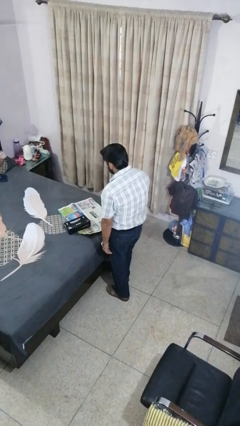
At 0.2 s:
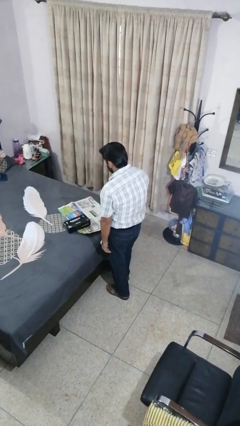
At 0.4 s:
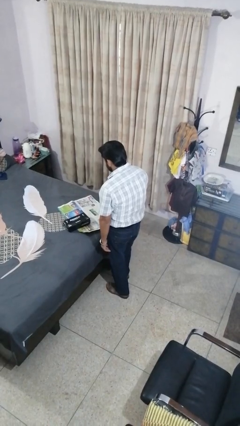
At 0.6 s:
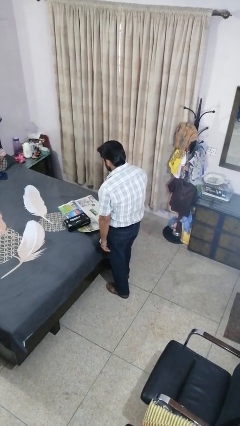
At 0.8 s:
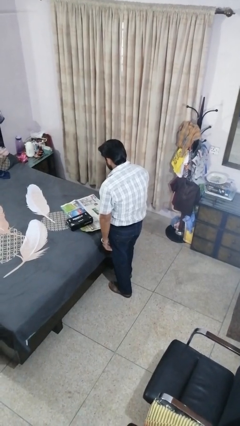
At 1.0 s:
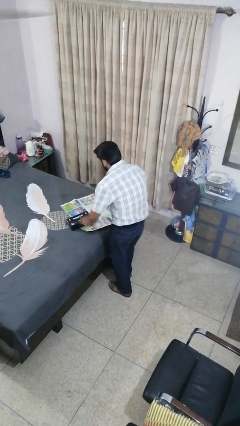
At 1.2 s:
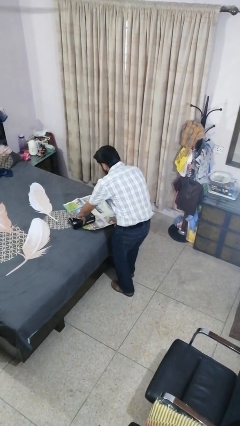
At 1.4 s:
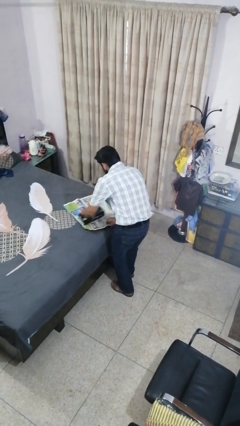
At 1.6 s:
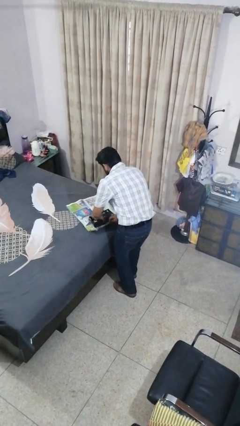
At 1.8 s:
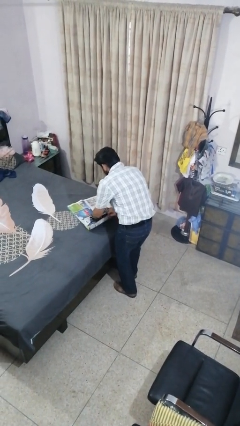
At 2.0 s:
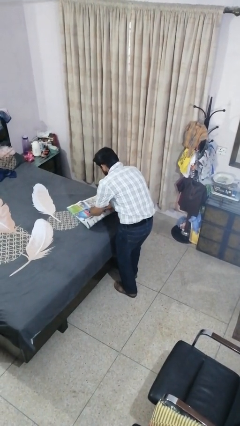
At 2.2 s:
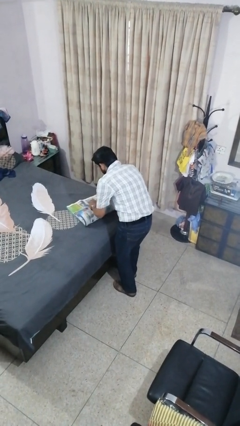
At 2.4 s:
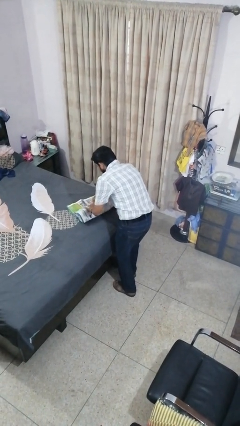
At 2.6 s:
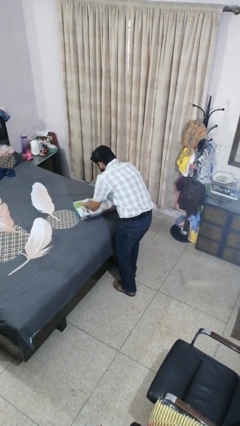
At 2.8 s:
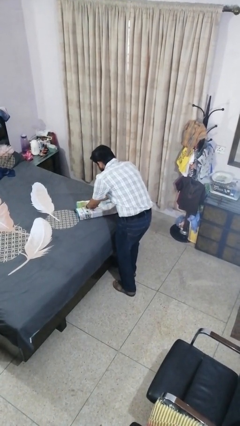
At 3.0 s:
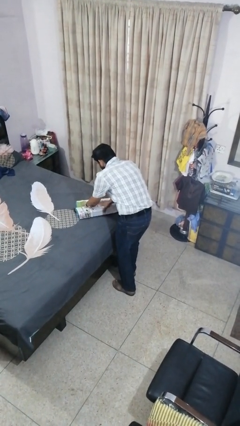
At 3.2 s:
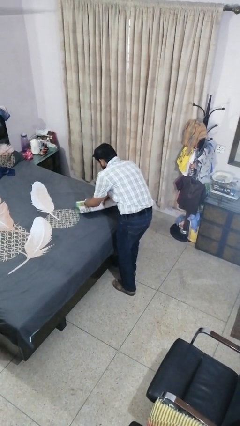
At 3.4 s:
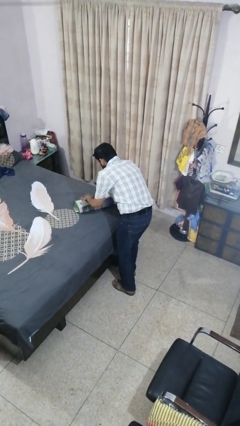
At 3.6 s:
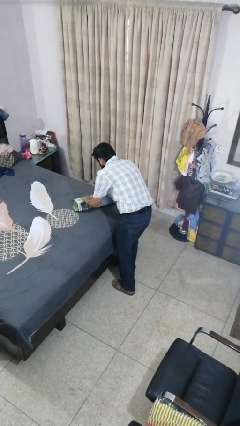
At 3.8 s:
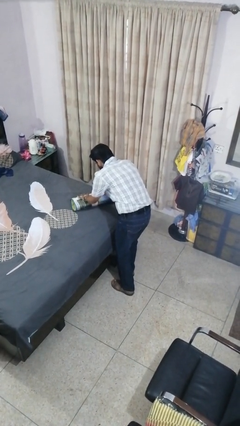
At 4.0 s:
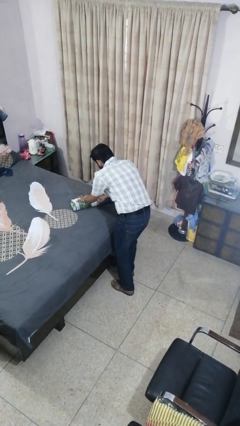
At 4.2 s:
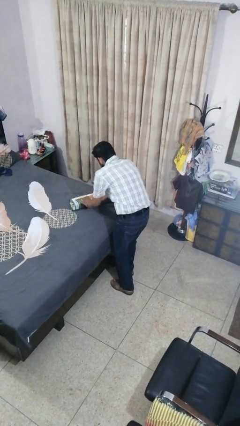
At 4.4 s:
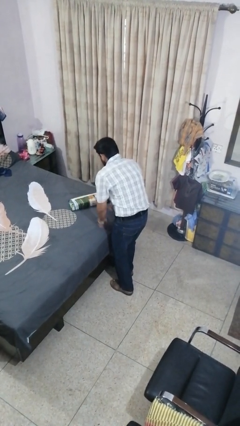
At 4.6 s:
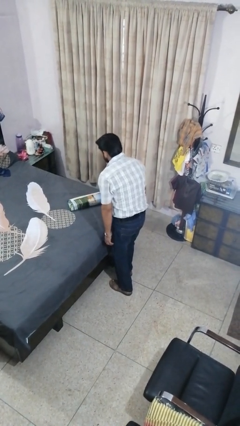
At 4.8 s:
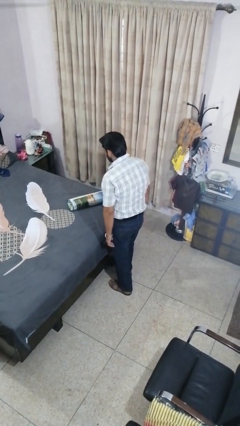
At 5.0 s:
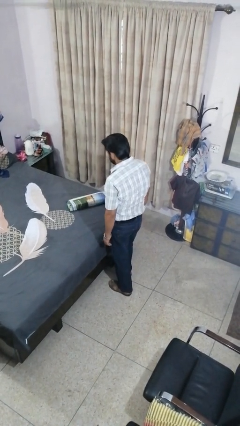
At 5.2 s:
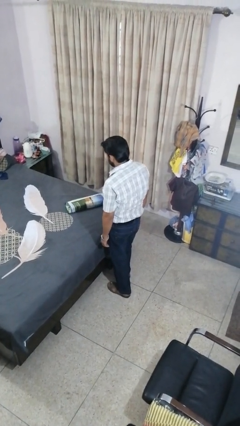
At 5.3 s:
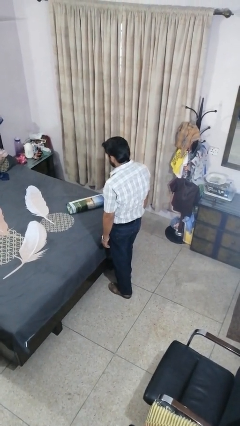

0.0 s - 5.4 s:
person wraps box

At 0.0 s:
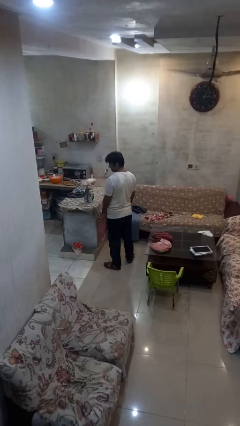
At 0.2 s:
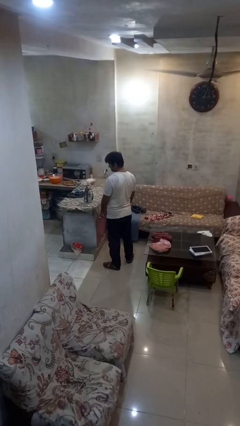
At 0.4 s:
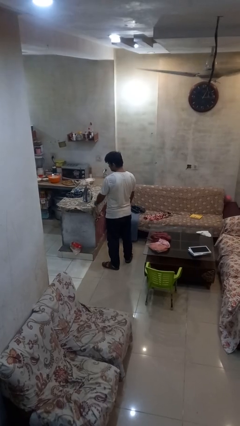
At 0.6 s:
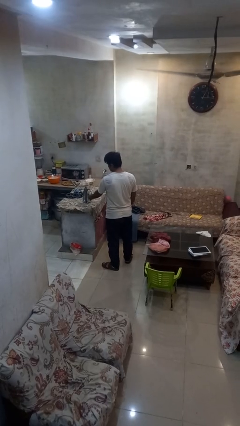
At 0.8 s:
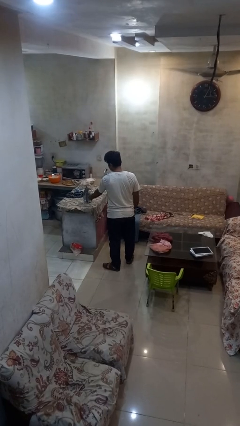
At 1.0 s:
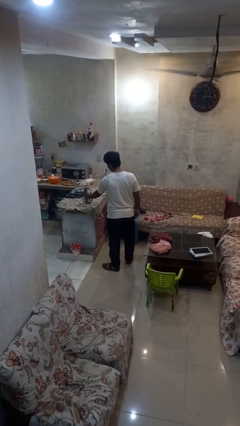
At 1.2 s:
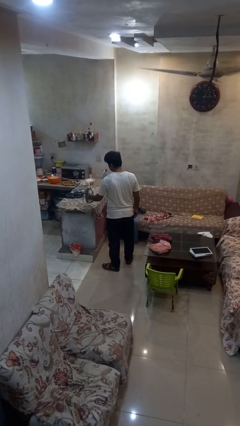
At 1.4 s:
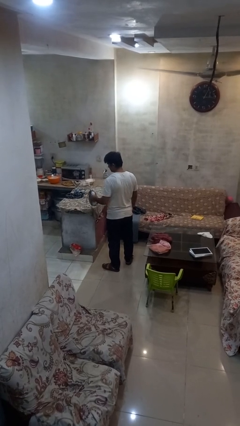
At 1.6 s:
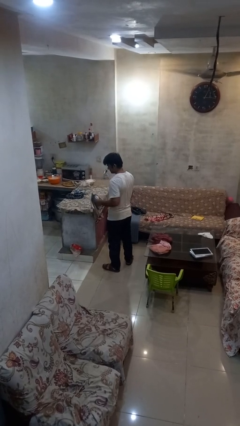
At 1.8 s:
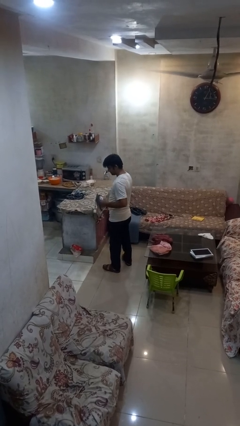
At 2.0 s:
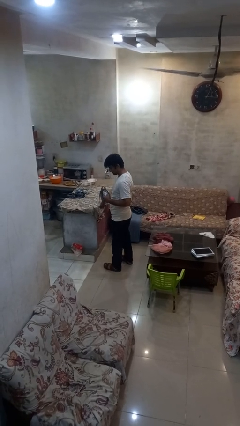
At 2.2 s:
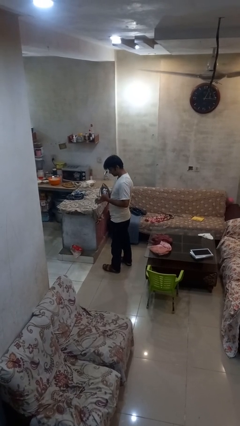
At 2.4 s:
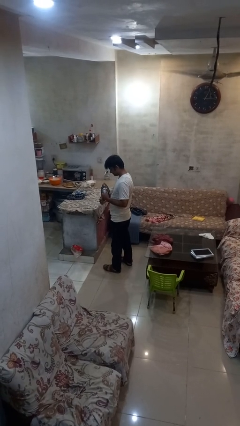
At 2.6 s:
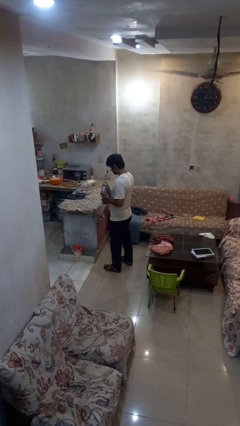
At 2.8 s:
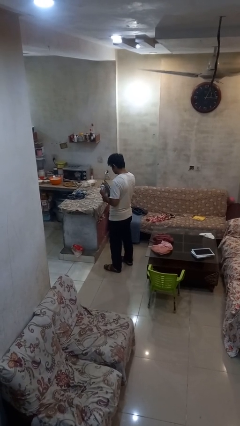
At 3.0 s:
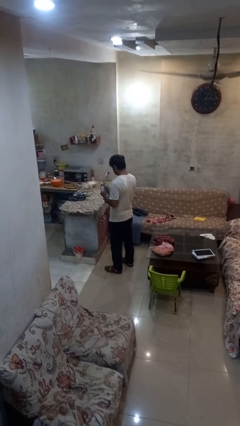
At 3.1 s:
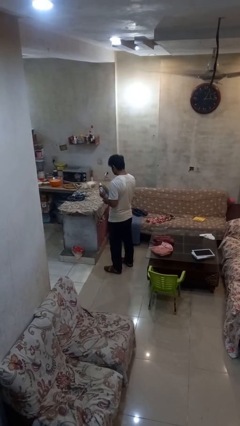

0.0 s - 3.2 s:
person picks up object from countertop

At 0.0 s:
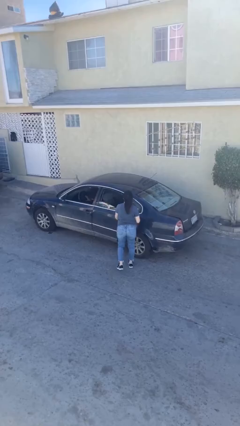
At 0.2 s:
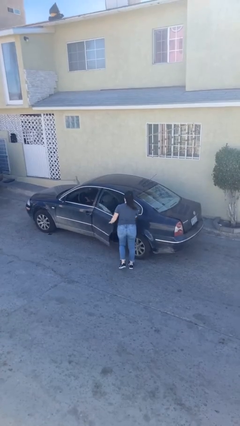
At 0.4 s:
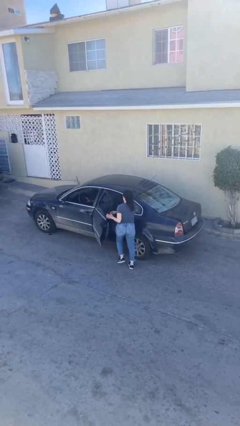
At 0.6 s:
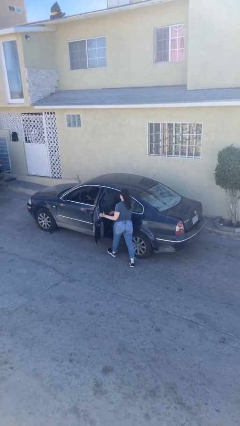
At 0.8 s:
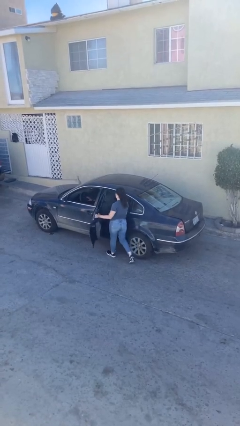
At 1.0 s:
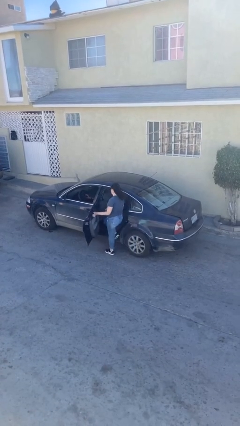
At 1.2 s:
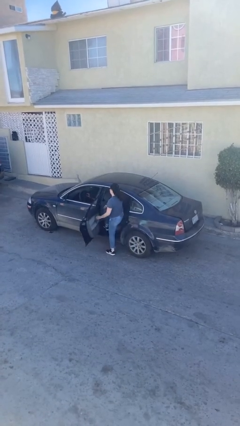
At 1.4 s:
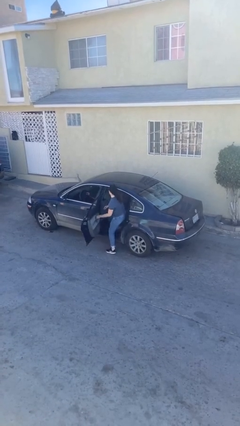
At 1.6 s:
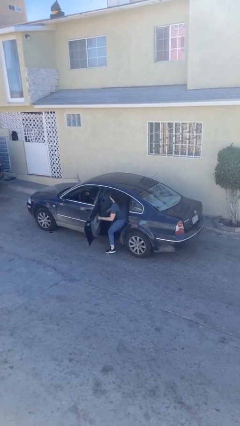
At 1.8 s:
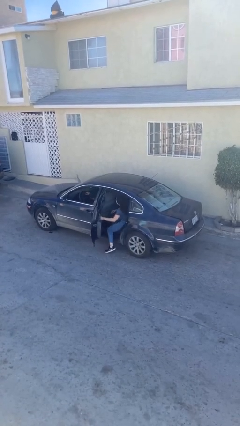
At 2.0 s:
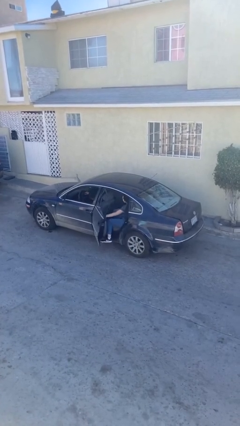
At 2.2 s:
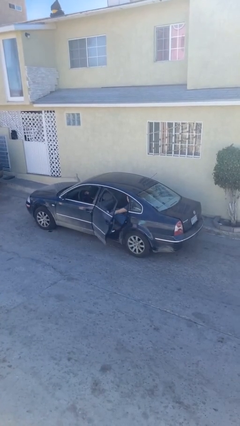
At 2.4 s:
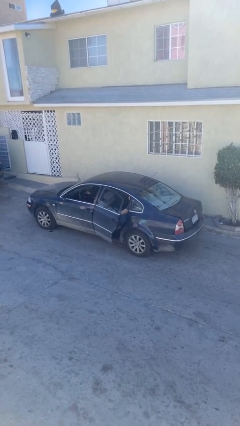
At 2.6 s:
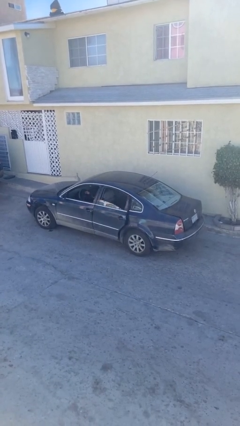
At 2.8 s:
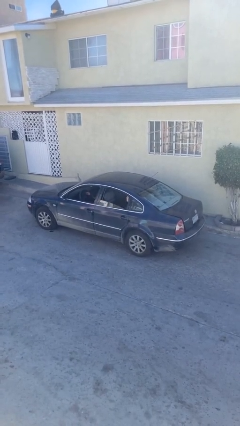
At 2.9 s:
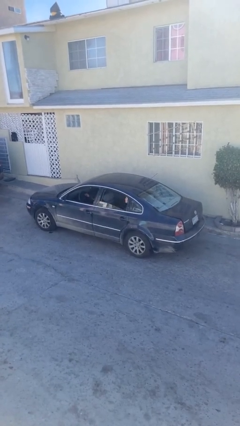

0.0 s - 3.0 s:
car picks up person

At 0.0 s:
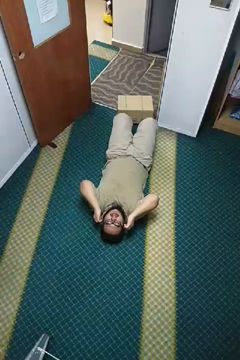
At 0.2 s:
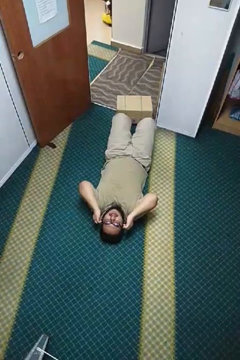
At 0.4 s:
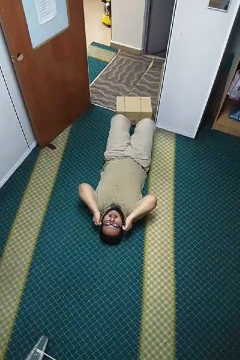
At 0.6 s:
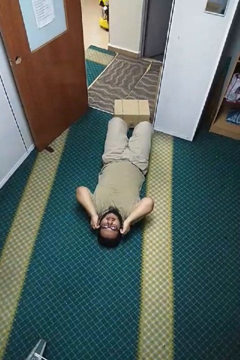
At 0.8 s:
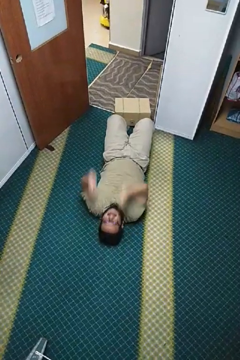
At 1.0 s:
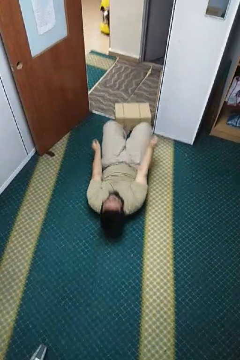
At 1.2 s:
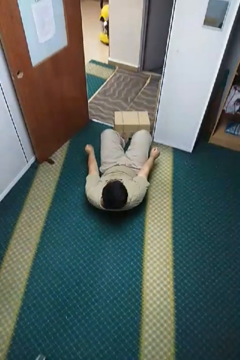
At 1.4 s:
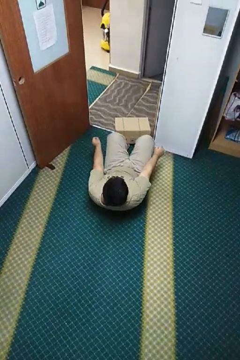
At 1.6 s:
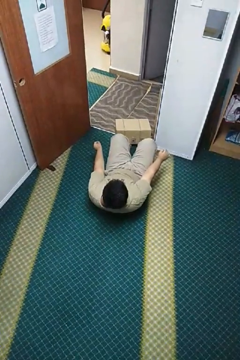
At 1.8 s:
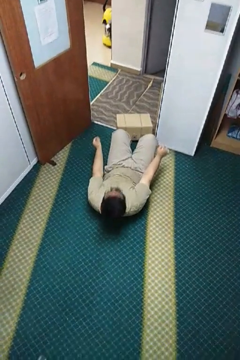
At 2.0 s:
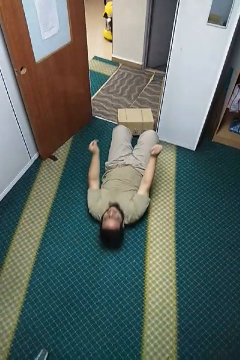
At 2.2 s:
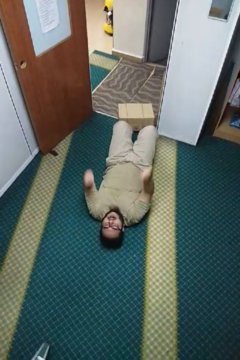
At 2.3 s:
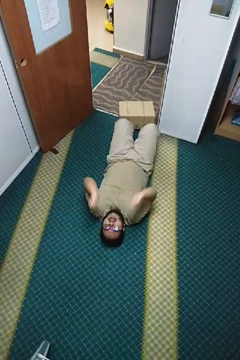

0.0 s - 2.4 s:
person exercises with situp

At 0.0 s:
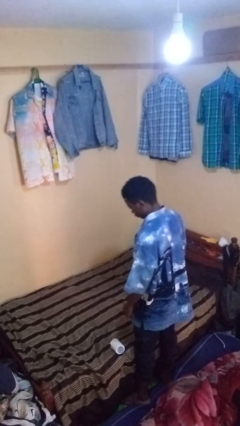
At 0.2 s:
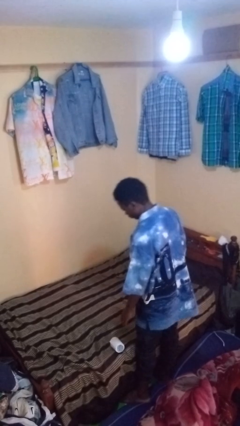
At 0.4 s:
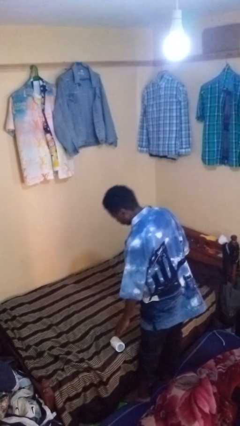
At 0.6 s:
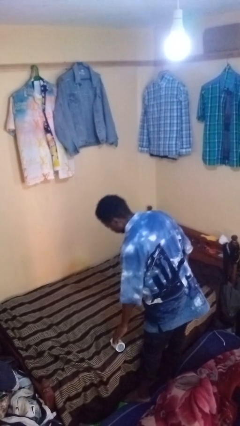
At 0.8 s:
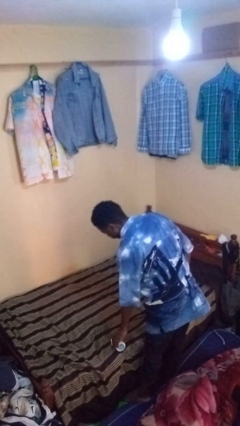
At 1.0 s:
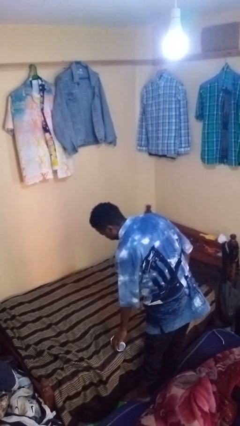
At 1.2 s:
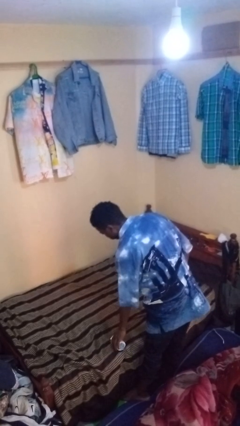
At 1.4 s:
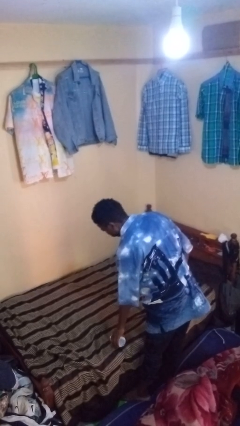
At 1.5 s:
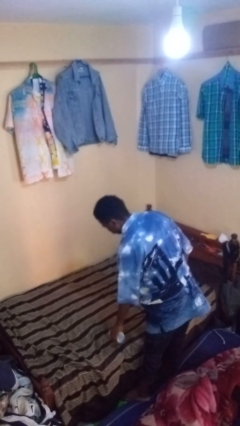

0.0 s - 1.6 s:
person picks up object from bed

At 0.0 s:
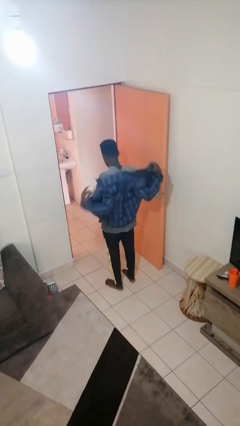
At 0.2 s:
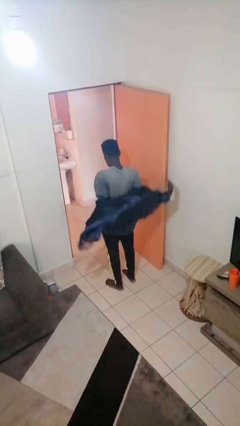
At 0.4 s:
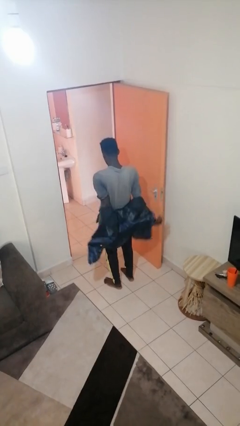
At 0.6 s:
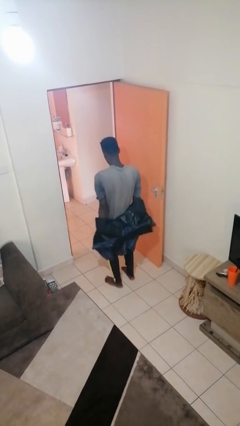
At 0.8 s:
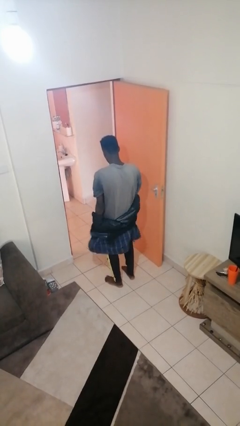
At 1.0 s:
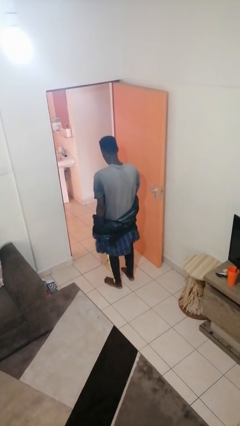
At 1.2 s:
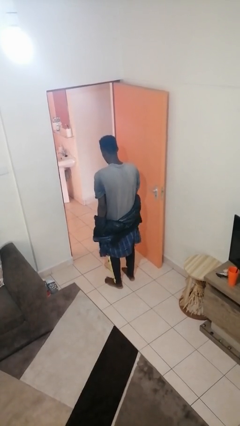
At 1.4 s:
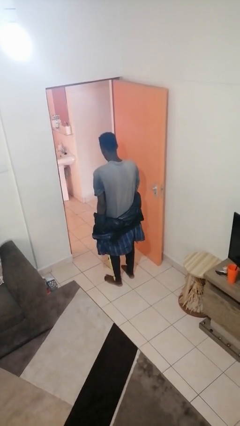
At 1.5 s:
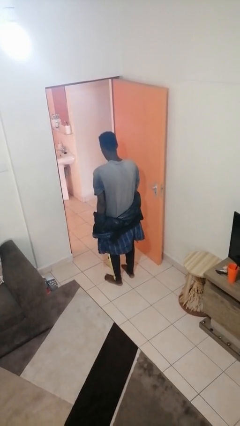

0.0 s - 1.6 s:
person takes off jacket

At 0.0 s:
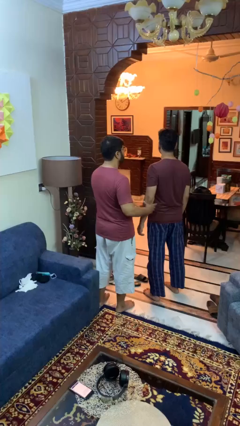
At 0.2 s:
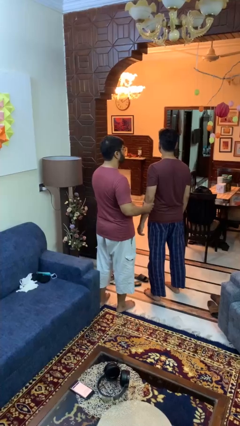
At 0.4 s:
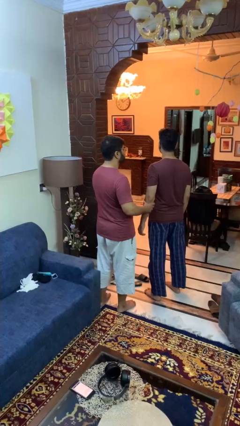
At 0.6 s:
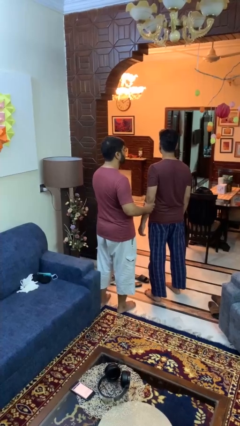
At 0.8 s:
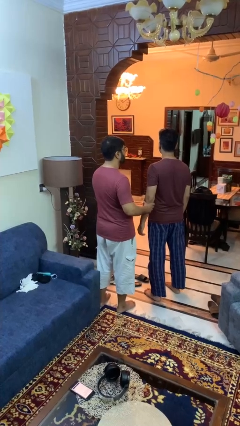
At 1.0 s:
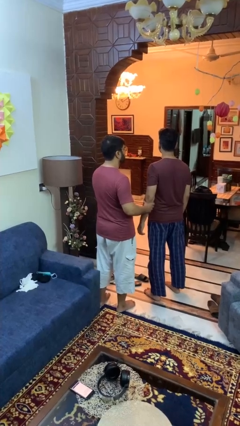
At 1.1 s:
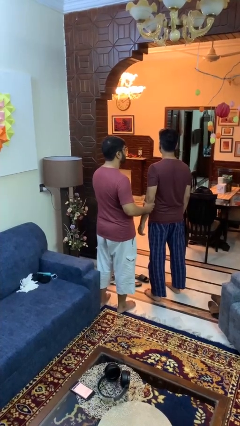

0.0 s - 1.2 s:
person grabs person by forearm
